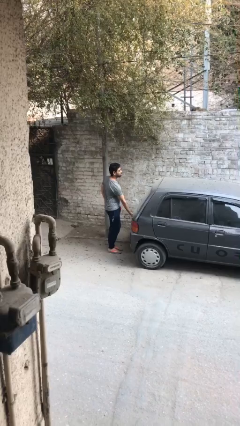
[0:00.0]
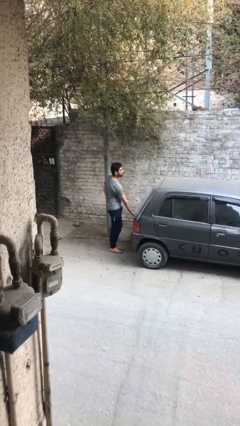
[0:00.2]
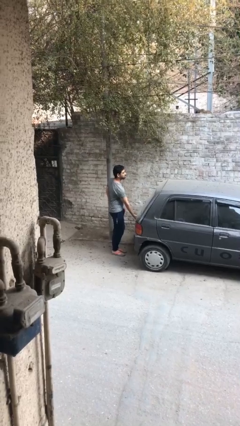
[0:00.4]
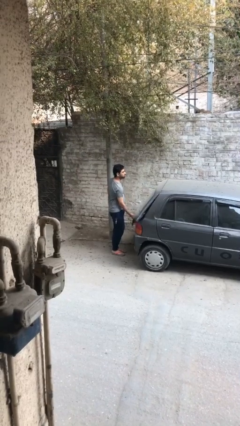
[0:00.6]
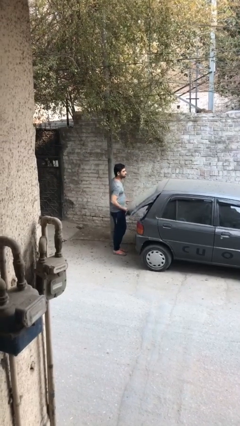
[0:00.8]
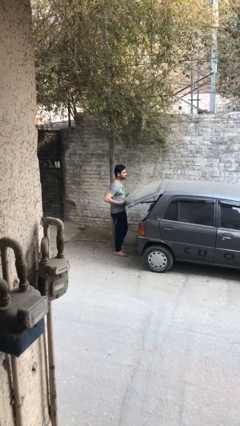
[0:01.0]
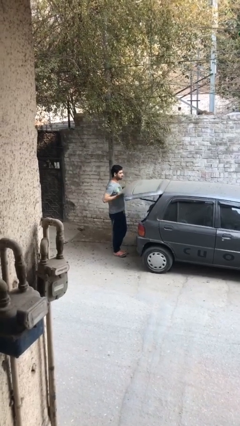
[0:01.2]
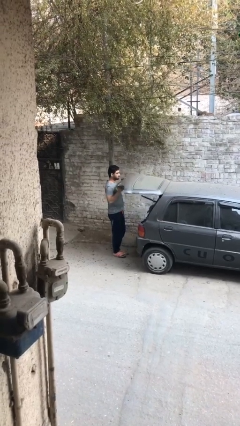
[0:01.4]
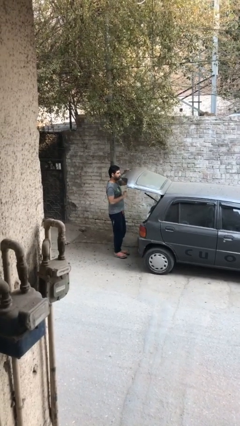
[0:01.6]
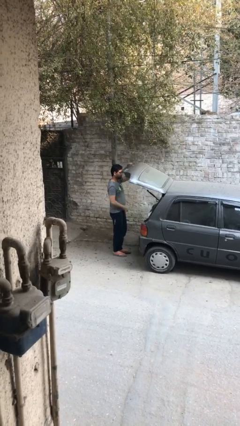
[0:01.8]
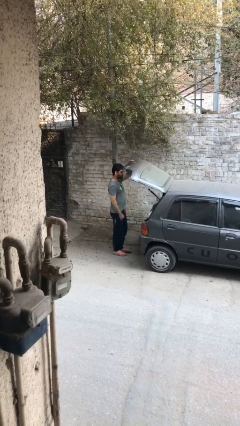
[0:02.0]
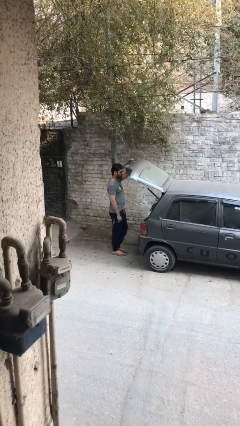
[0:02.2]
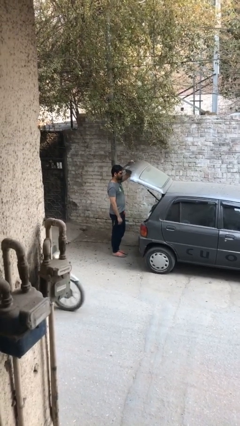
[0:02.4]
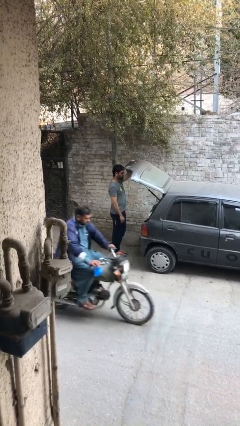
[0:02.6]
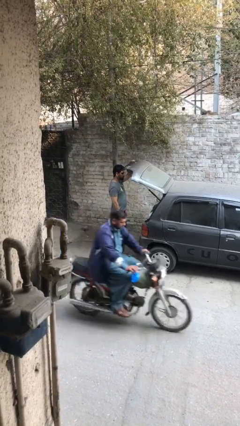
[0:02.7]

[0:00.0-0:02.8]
person opens car trunk

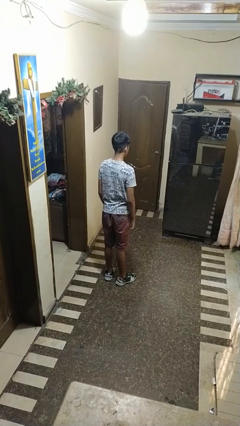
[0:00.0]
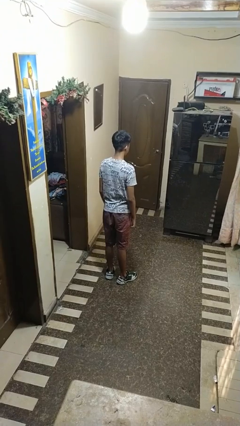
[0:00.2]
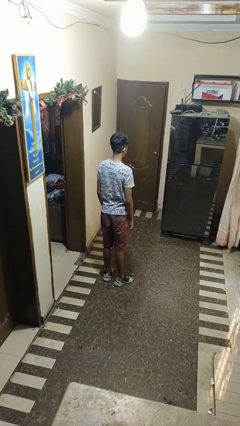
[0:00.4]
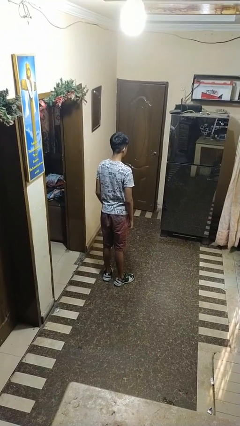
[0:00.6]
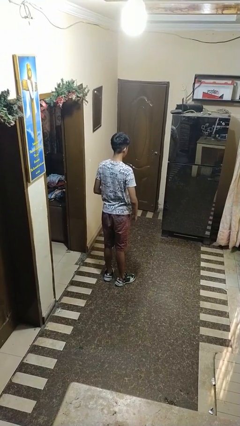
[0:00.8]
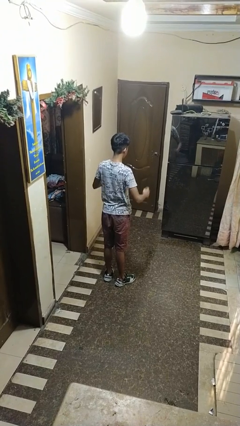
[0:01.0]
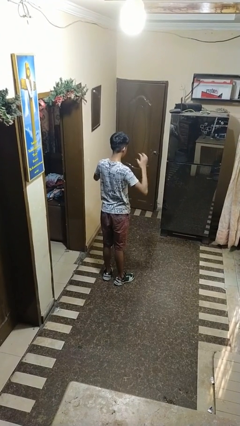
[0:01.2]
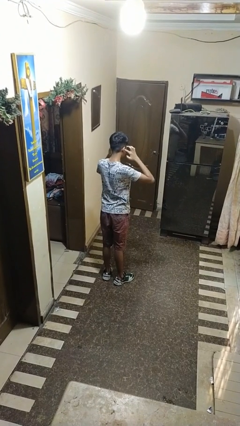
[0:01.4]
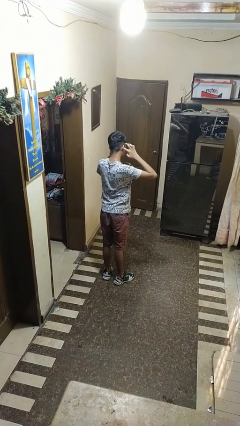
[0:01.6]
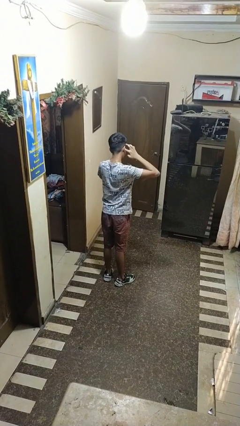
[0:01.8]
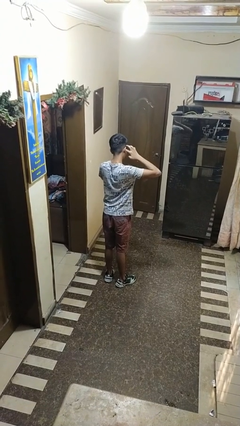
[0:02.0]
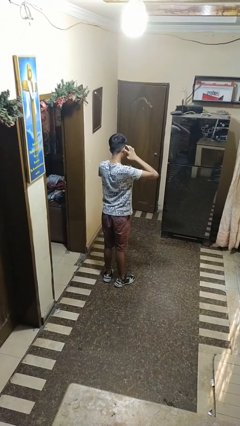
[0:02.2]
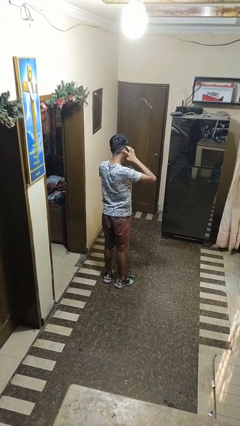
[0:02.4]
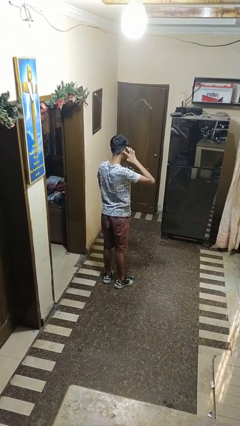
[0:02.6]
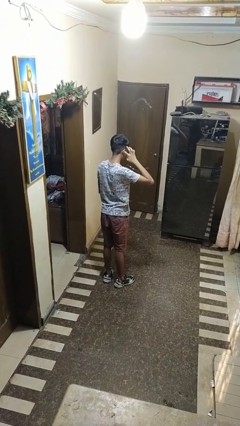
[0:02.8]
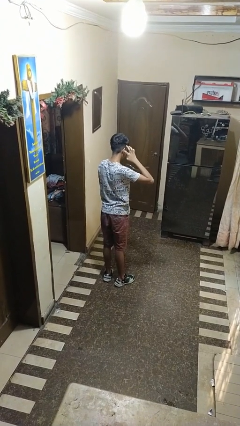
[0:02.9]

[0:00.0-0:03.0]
person puts fingers in ear

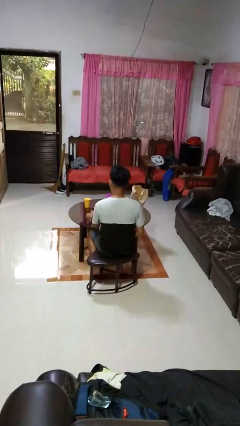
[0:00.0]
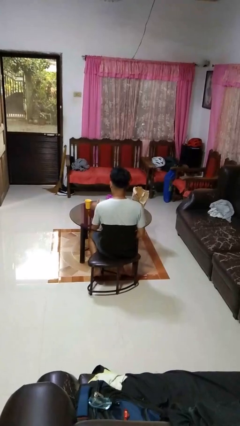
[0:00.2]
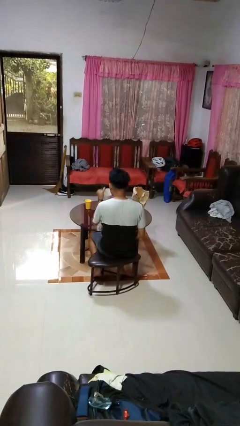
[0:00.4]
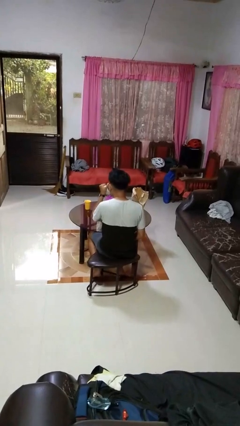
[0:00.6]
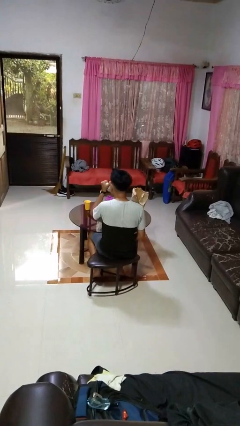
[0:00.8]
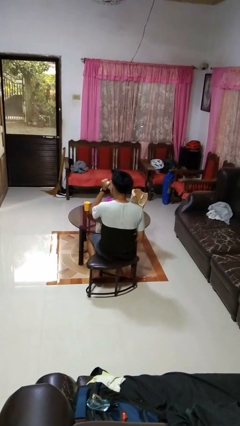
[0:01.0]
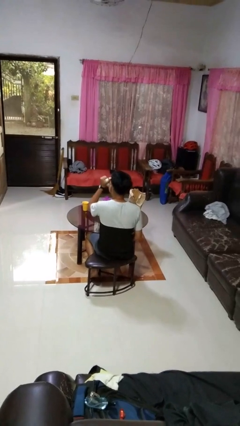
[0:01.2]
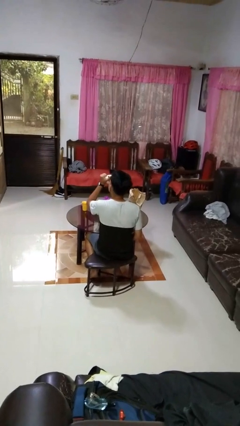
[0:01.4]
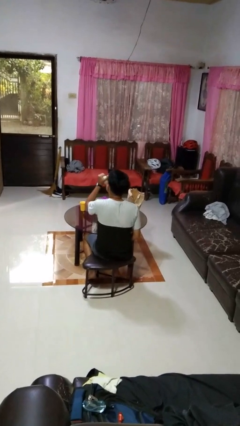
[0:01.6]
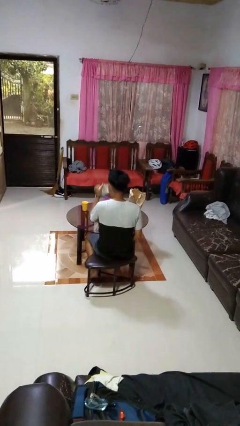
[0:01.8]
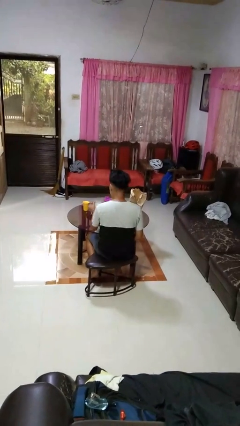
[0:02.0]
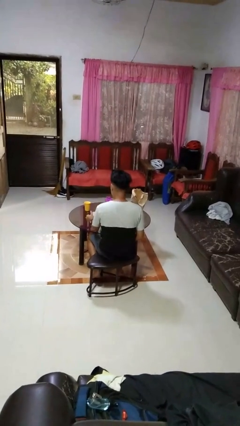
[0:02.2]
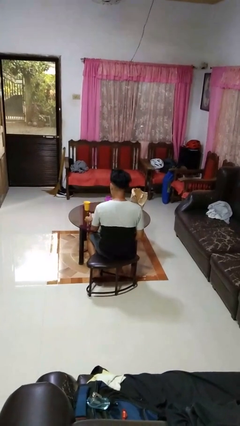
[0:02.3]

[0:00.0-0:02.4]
person drinks from mug

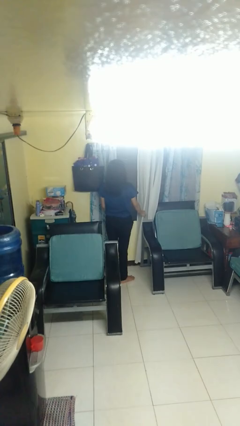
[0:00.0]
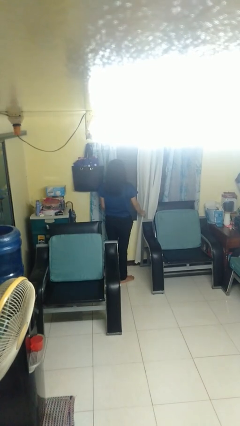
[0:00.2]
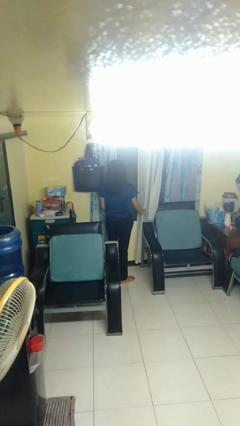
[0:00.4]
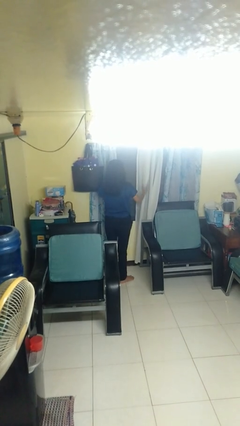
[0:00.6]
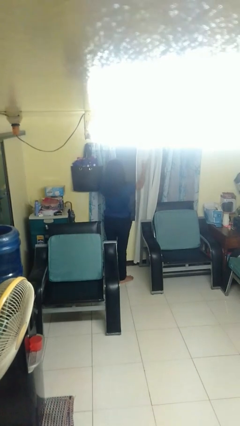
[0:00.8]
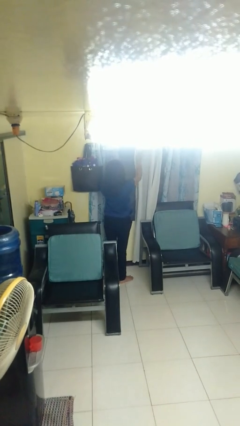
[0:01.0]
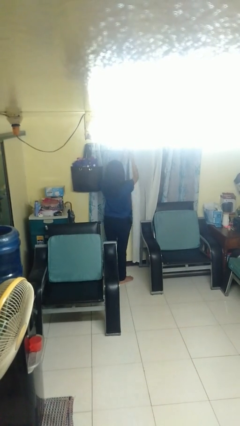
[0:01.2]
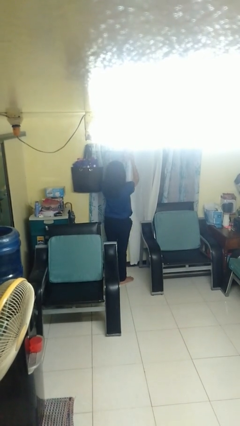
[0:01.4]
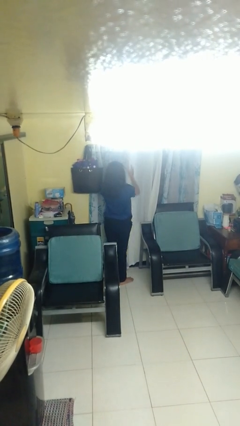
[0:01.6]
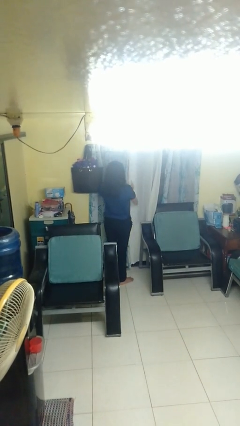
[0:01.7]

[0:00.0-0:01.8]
person closes curtains

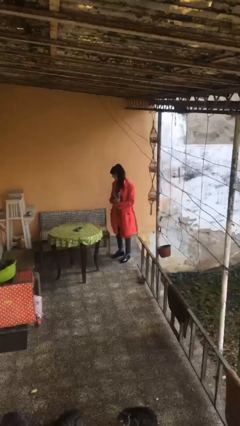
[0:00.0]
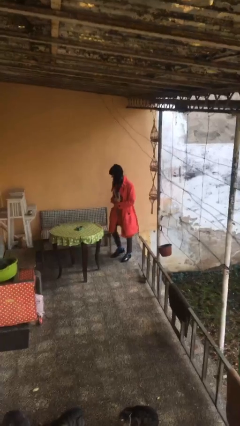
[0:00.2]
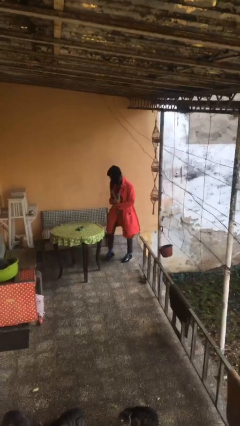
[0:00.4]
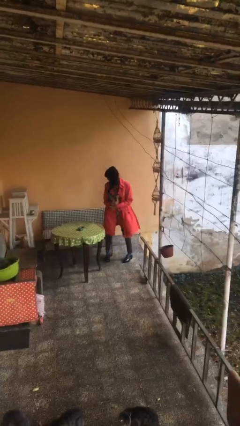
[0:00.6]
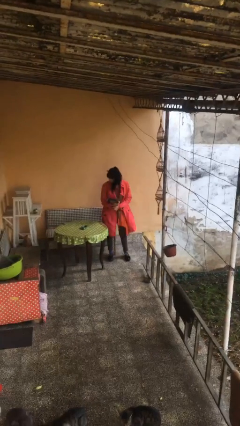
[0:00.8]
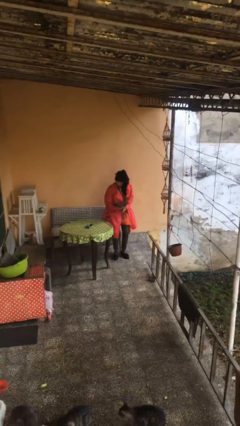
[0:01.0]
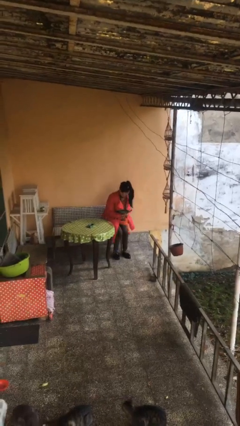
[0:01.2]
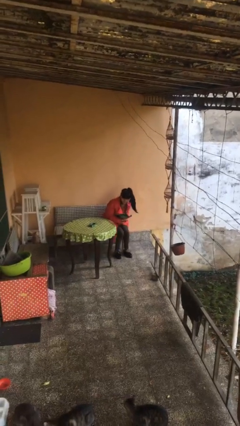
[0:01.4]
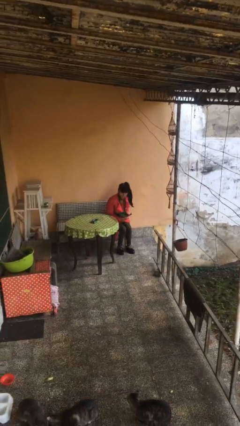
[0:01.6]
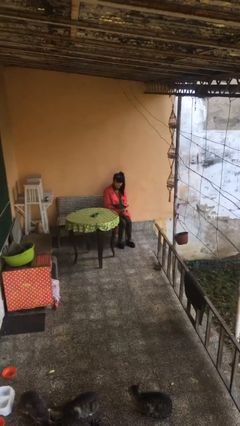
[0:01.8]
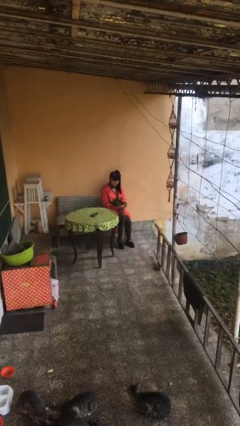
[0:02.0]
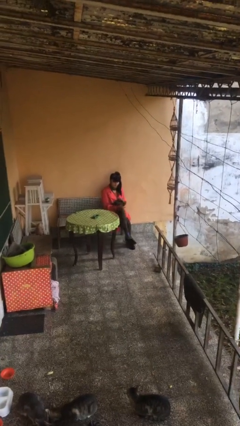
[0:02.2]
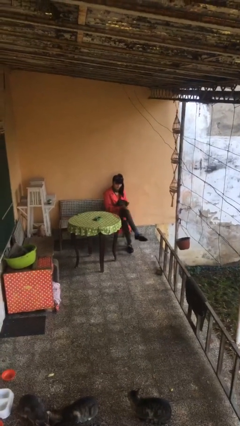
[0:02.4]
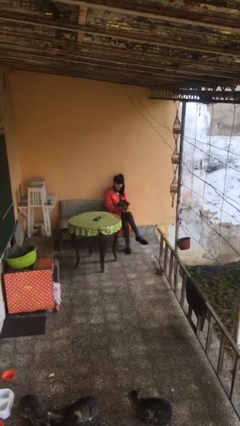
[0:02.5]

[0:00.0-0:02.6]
person sits down

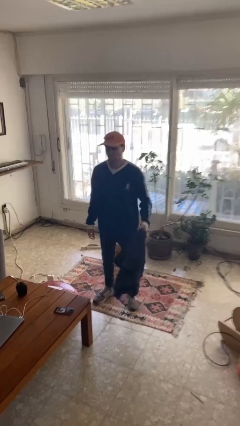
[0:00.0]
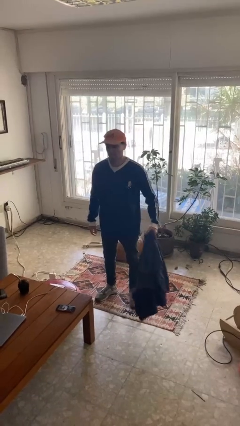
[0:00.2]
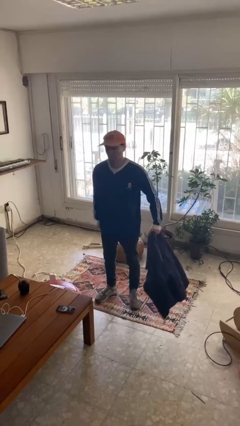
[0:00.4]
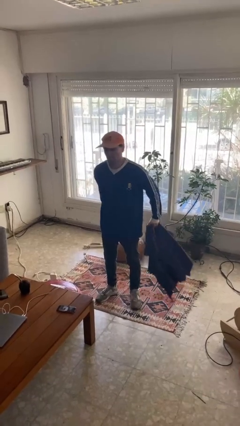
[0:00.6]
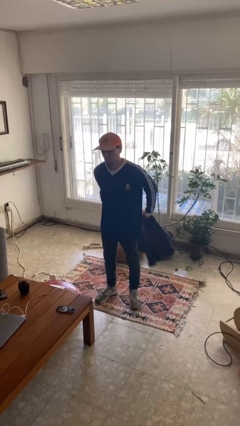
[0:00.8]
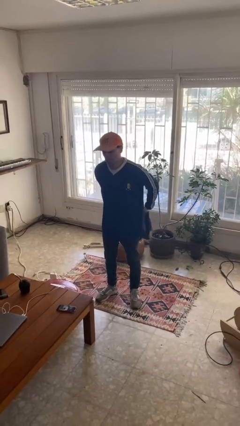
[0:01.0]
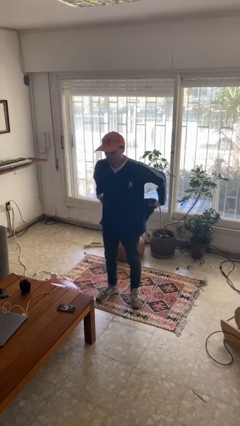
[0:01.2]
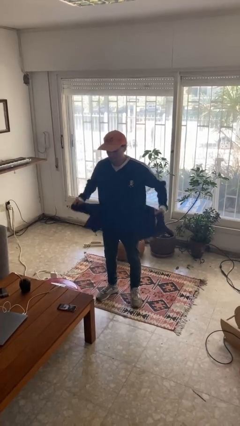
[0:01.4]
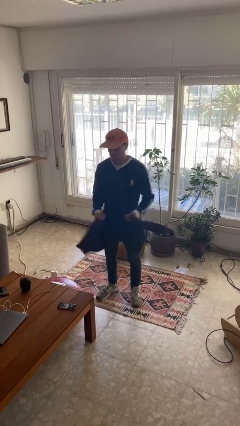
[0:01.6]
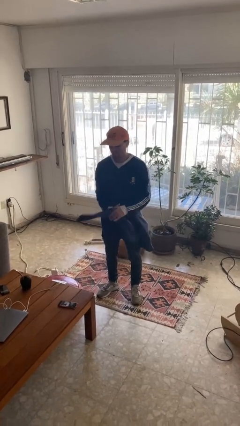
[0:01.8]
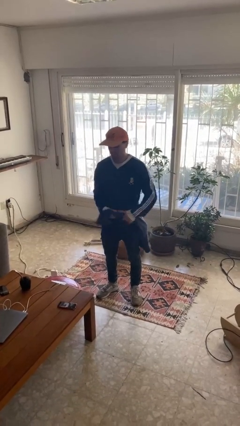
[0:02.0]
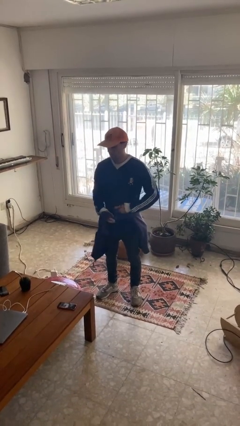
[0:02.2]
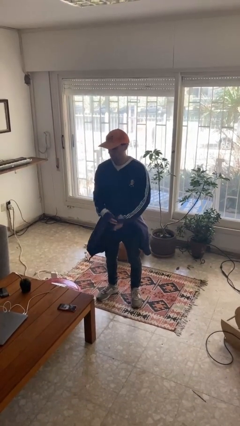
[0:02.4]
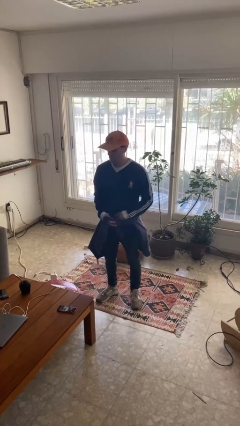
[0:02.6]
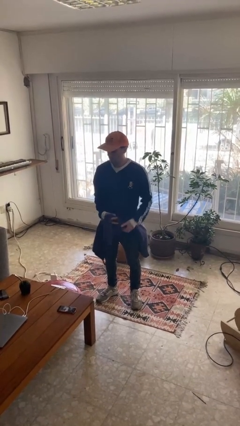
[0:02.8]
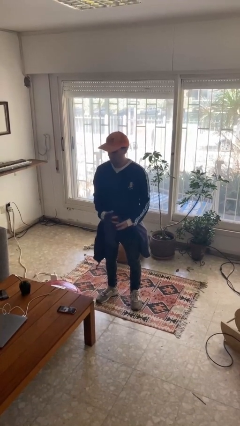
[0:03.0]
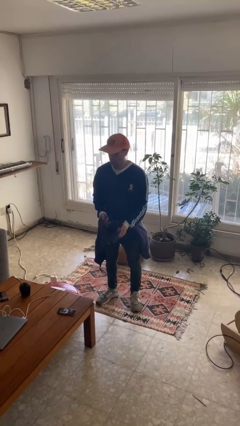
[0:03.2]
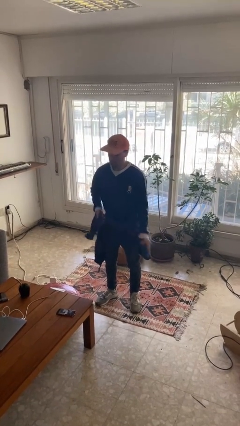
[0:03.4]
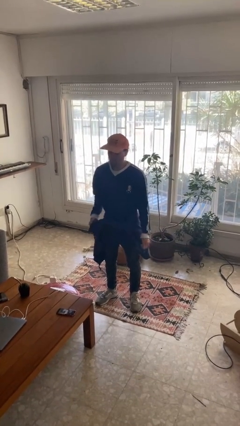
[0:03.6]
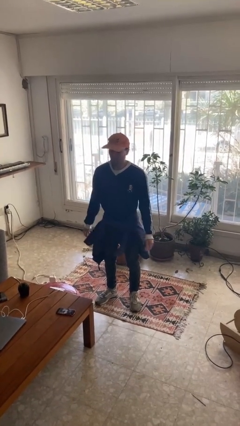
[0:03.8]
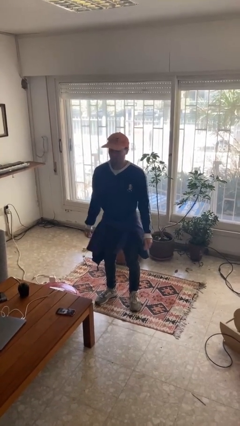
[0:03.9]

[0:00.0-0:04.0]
person ties jacket around waist

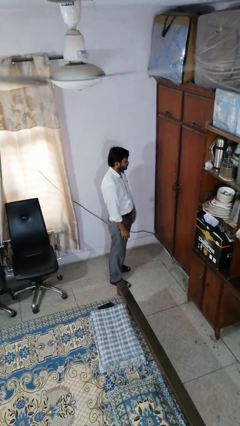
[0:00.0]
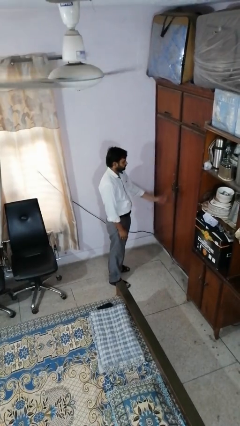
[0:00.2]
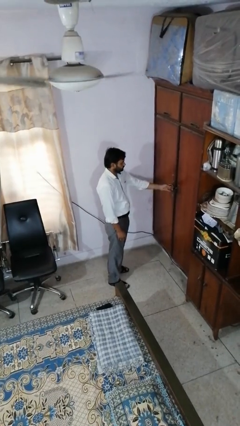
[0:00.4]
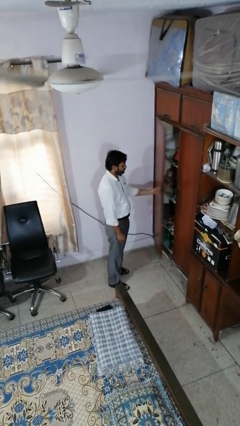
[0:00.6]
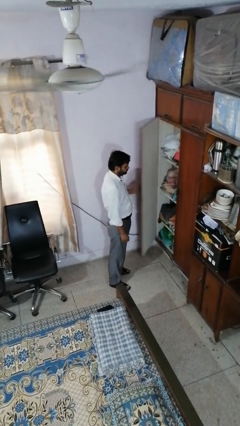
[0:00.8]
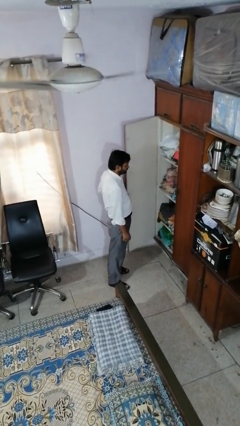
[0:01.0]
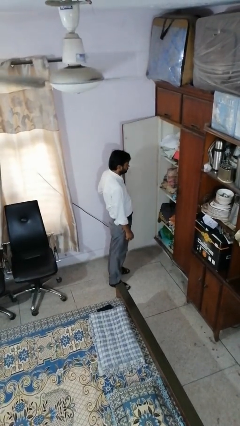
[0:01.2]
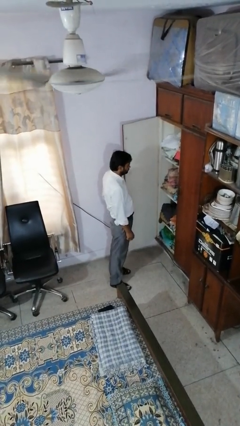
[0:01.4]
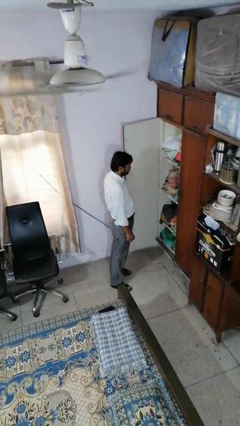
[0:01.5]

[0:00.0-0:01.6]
person opens closet door
